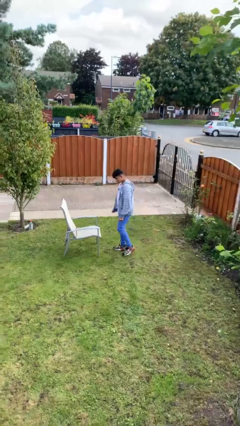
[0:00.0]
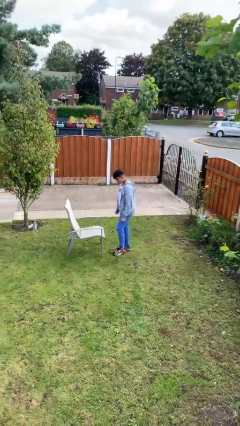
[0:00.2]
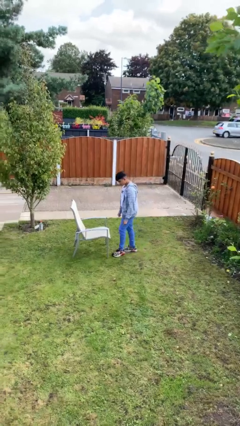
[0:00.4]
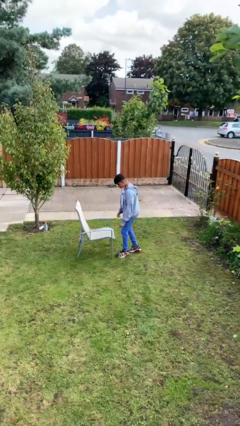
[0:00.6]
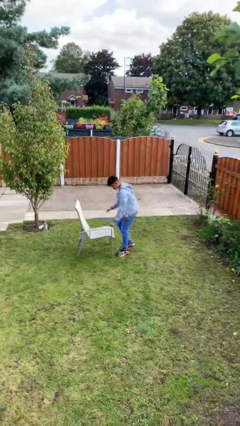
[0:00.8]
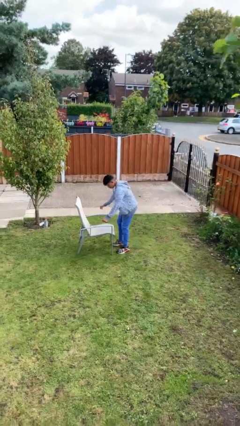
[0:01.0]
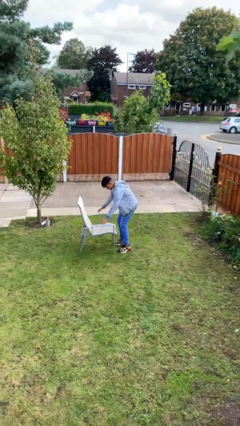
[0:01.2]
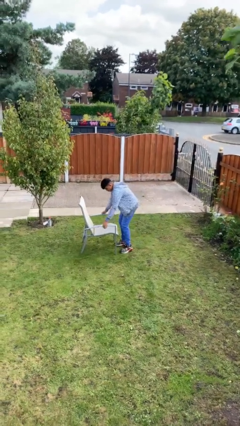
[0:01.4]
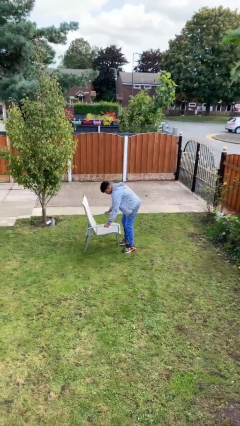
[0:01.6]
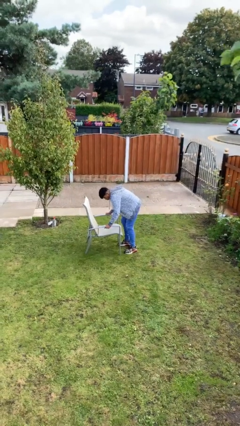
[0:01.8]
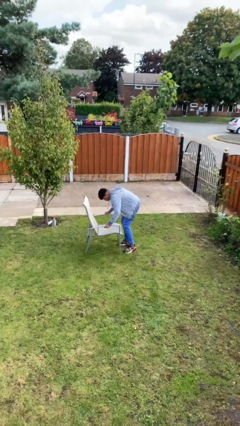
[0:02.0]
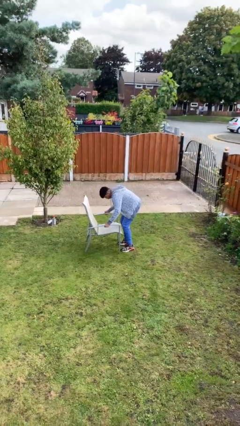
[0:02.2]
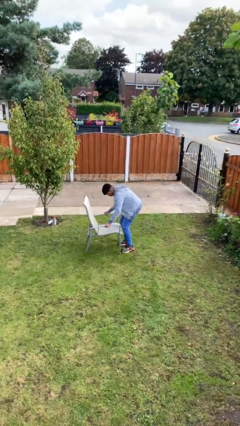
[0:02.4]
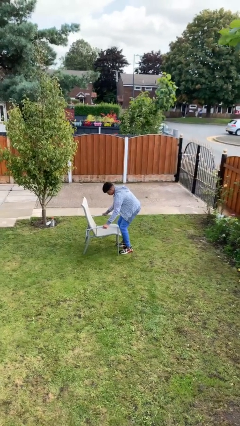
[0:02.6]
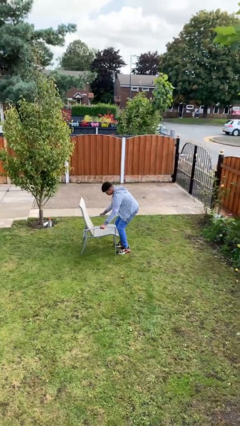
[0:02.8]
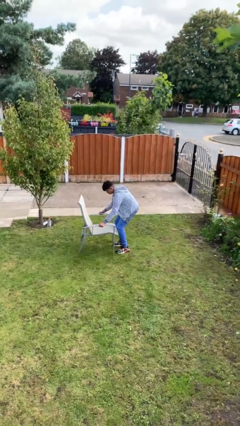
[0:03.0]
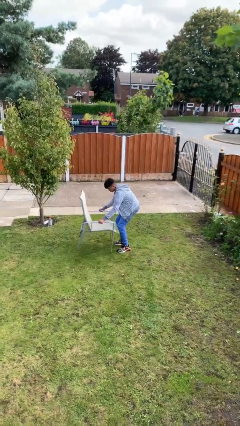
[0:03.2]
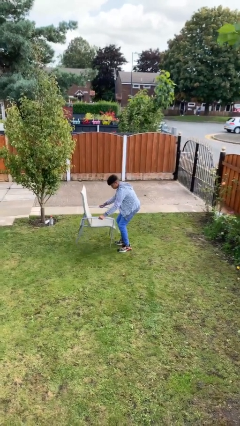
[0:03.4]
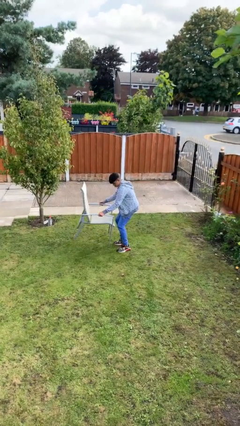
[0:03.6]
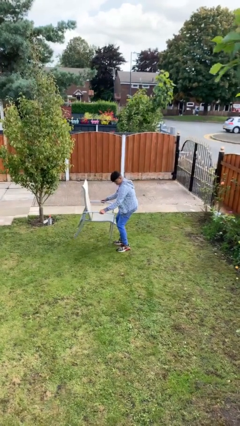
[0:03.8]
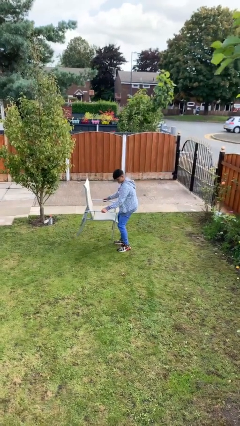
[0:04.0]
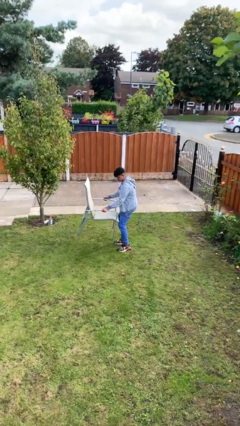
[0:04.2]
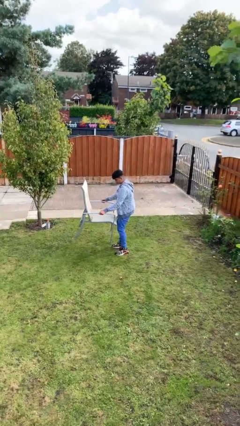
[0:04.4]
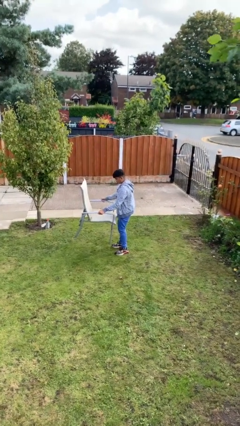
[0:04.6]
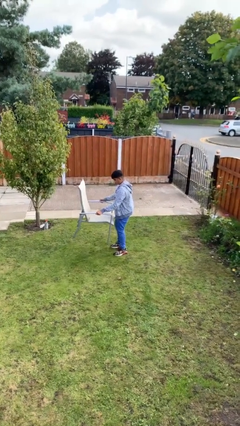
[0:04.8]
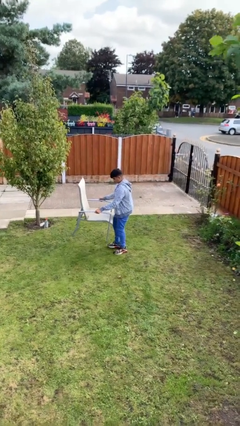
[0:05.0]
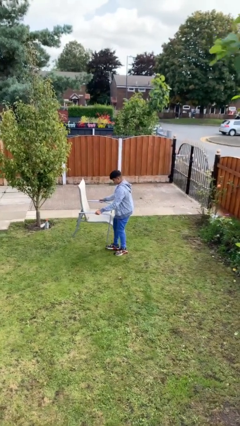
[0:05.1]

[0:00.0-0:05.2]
person picks up object from floor

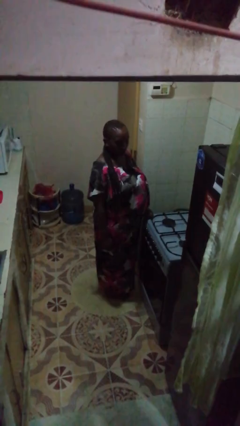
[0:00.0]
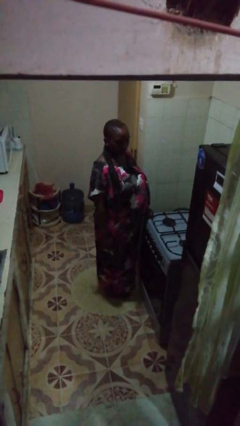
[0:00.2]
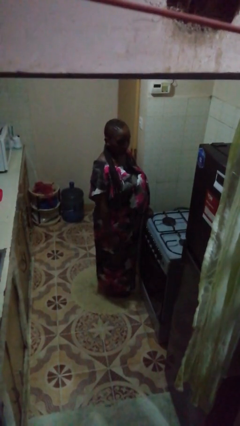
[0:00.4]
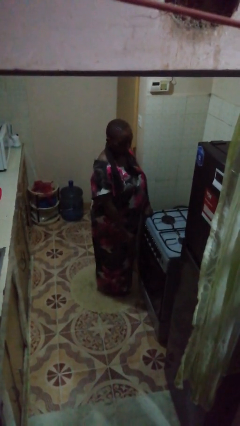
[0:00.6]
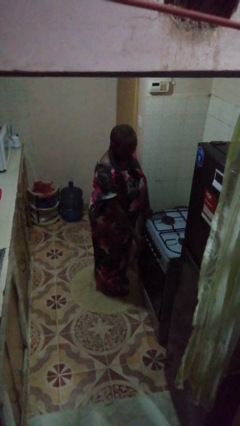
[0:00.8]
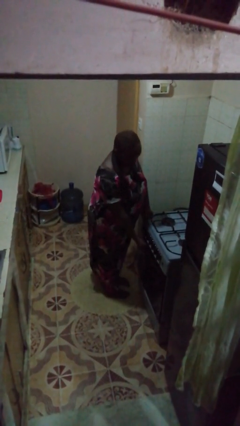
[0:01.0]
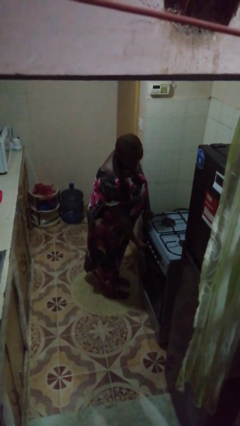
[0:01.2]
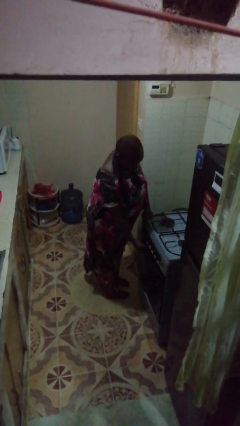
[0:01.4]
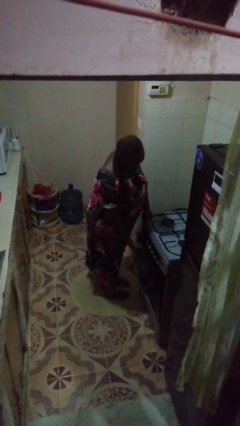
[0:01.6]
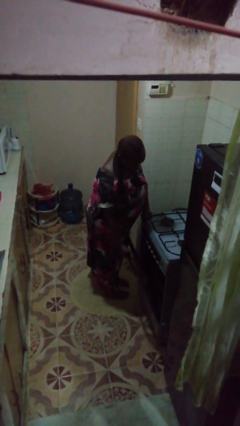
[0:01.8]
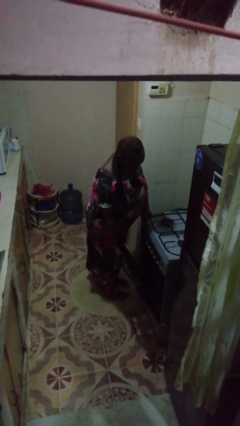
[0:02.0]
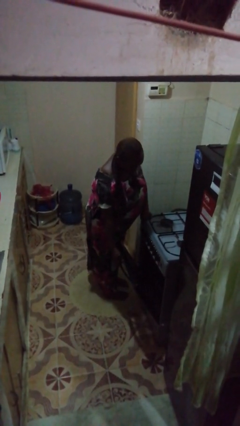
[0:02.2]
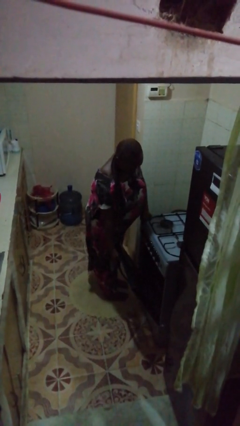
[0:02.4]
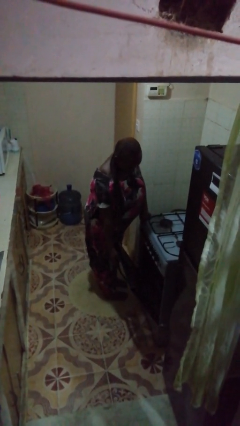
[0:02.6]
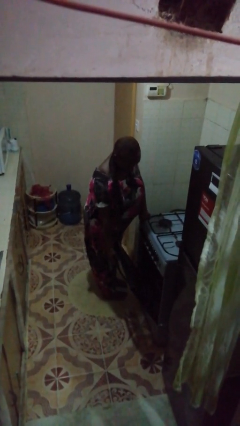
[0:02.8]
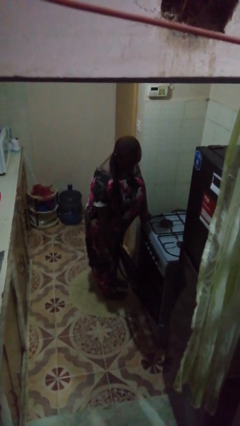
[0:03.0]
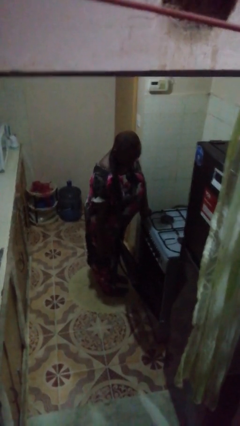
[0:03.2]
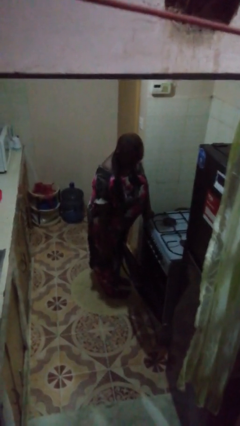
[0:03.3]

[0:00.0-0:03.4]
person opens oven door

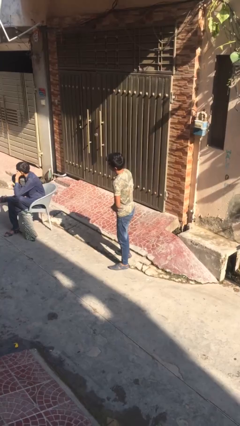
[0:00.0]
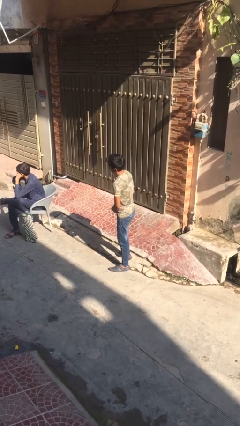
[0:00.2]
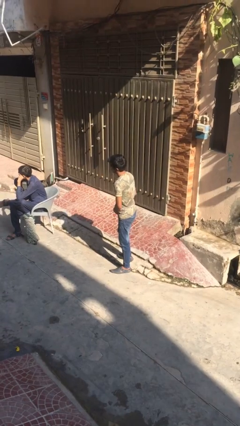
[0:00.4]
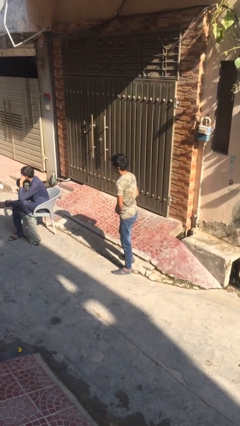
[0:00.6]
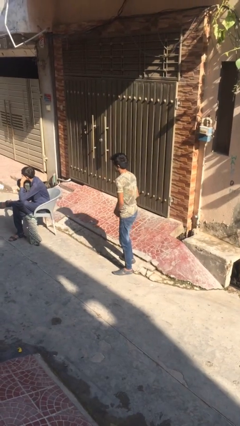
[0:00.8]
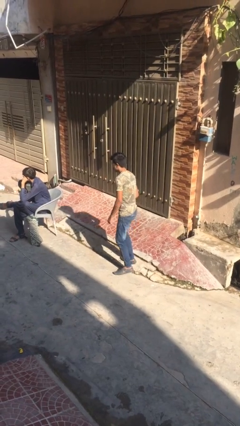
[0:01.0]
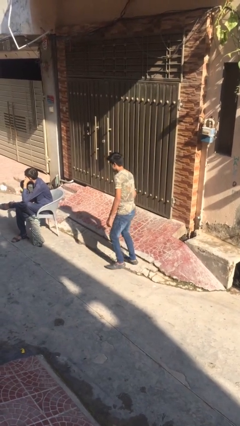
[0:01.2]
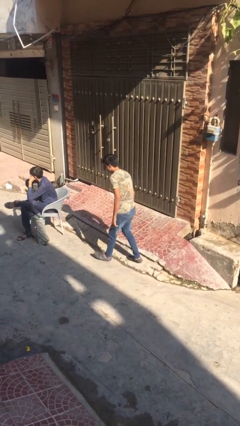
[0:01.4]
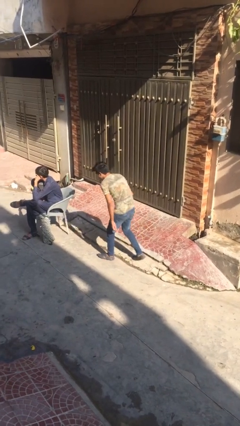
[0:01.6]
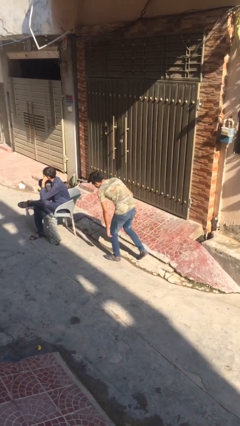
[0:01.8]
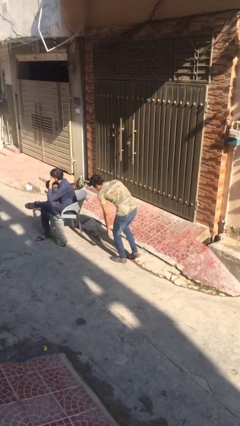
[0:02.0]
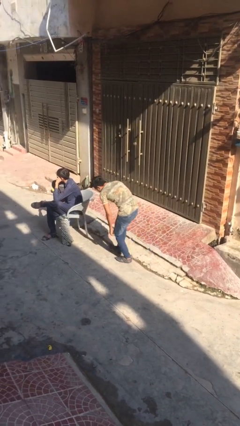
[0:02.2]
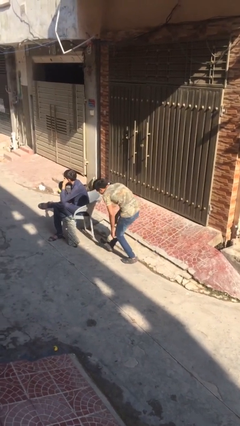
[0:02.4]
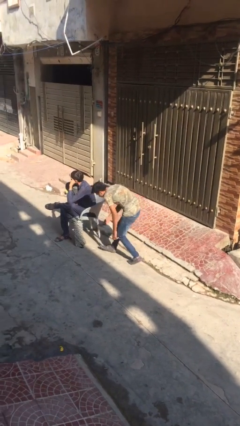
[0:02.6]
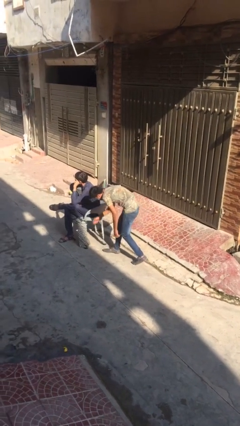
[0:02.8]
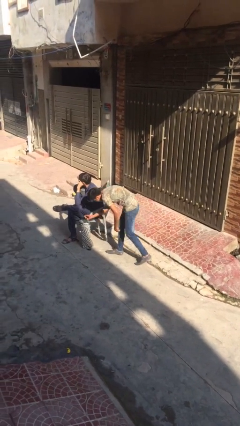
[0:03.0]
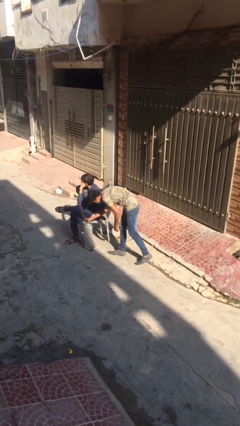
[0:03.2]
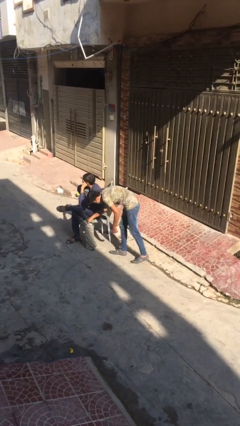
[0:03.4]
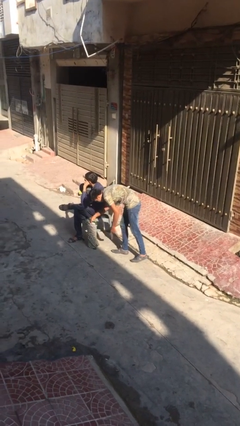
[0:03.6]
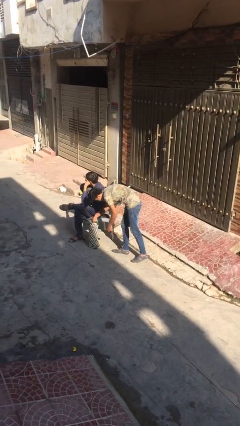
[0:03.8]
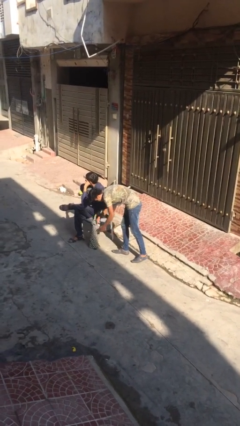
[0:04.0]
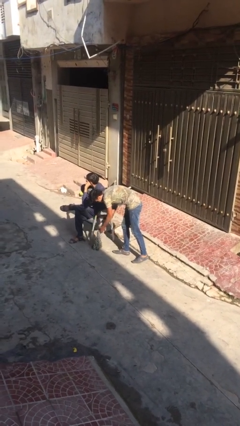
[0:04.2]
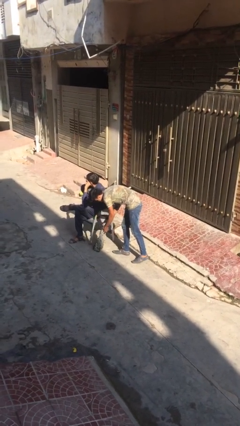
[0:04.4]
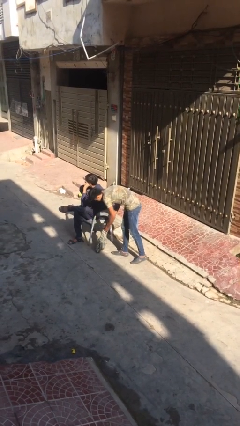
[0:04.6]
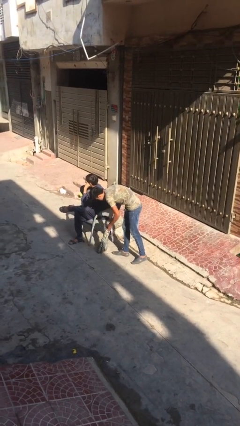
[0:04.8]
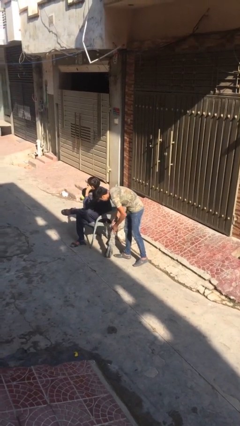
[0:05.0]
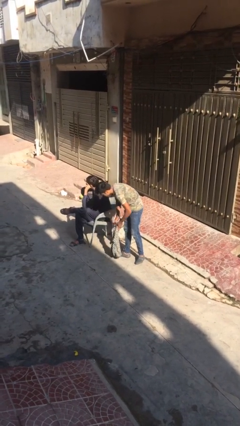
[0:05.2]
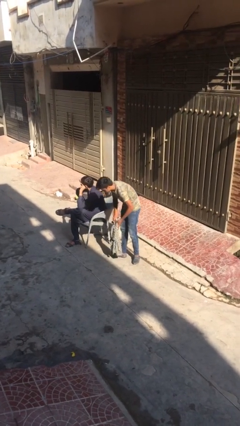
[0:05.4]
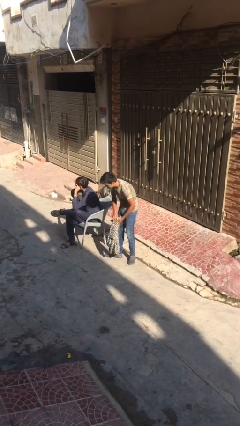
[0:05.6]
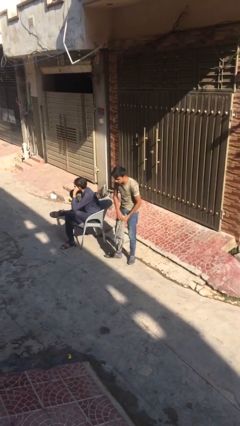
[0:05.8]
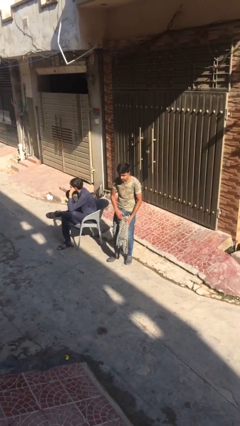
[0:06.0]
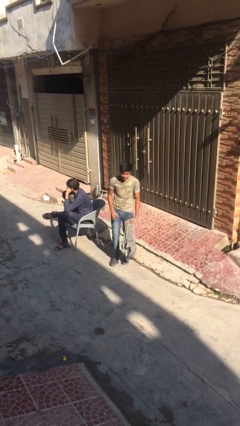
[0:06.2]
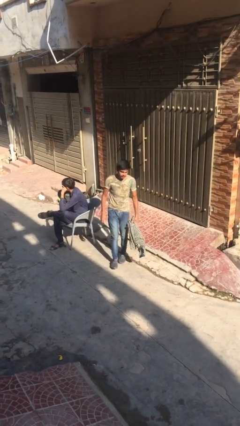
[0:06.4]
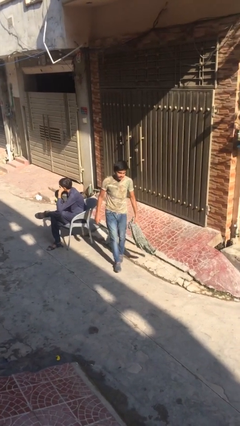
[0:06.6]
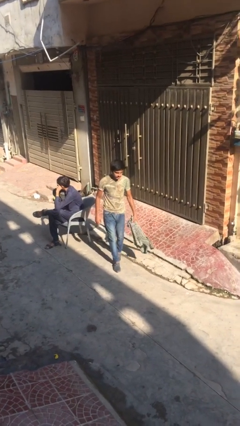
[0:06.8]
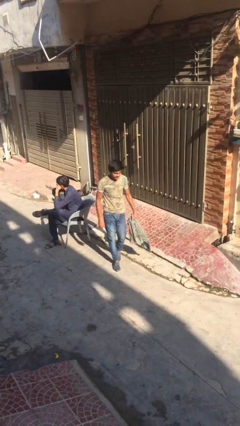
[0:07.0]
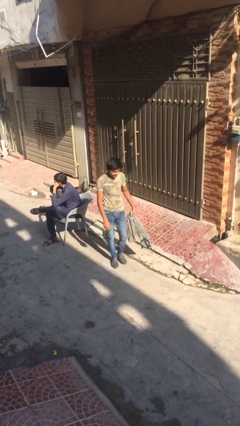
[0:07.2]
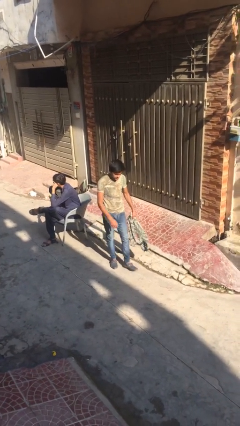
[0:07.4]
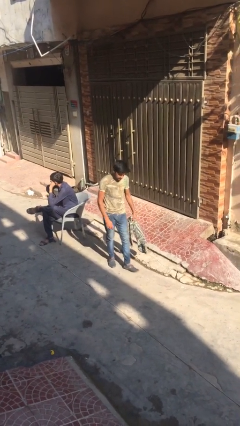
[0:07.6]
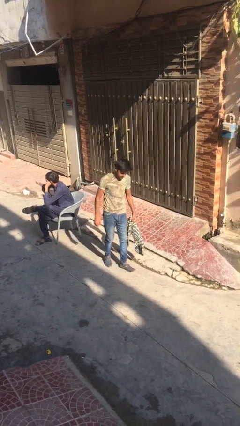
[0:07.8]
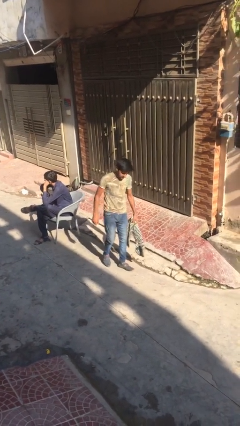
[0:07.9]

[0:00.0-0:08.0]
person steals object from person

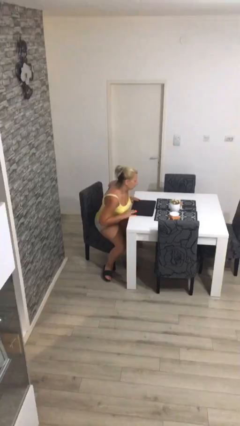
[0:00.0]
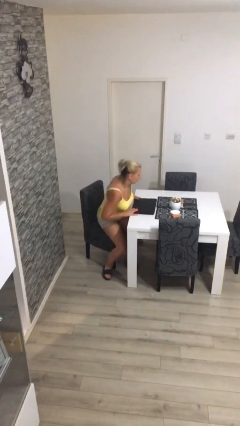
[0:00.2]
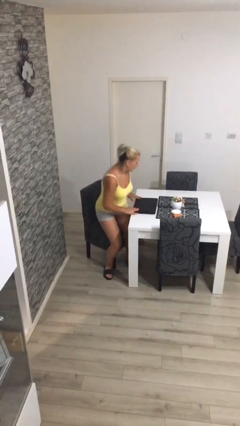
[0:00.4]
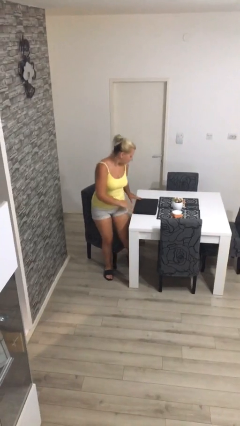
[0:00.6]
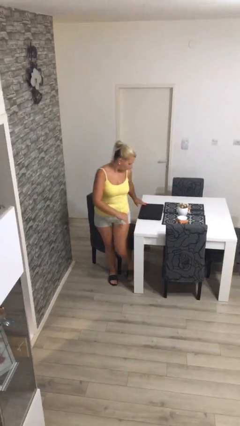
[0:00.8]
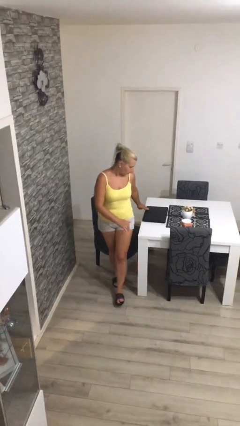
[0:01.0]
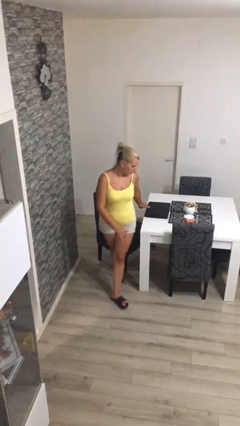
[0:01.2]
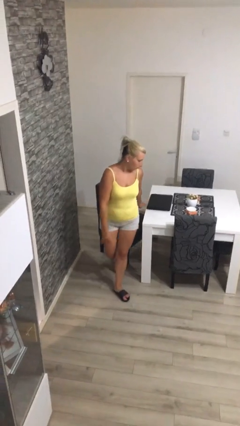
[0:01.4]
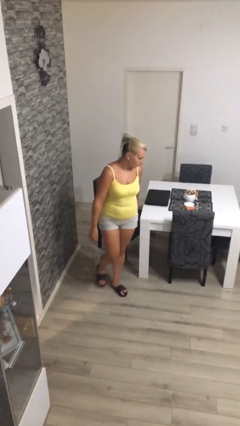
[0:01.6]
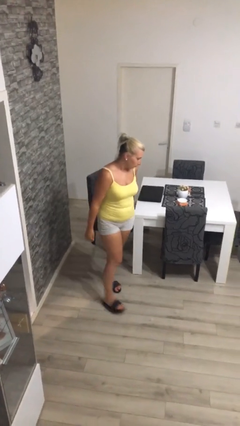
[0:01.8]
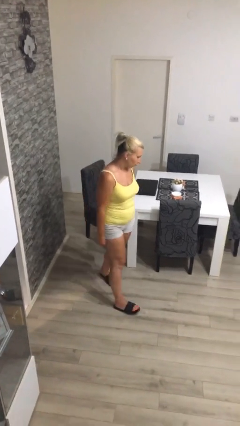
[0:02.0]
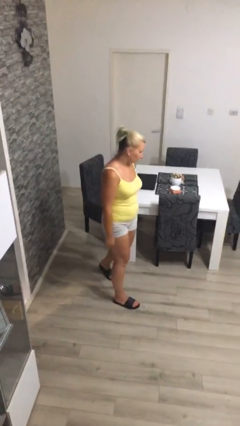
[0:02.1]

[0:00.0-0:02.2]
person stands up
